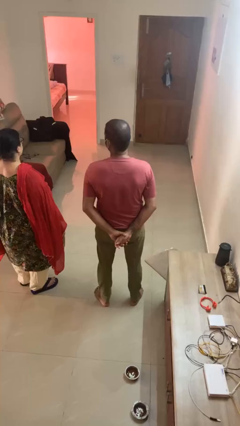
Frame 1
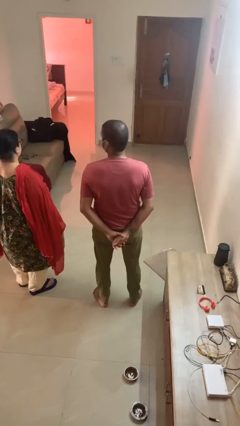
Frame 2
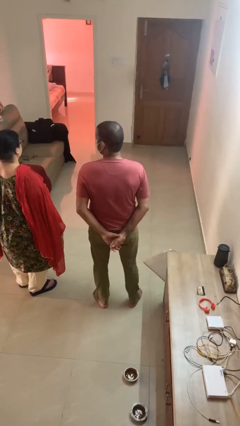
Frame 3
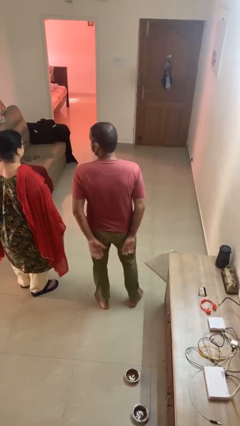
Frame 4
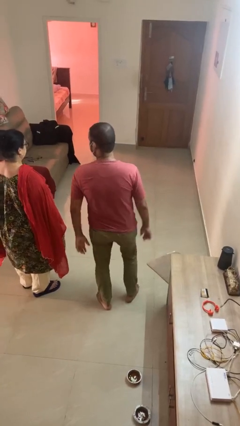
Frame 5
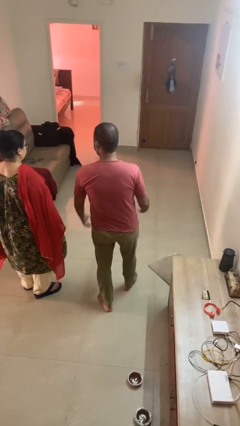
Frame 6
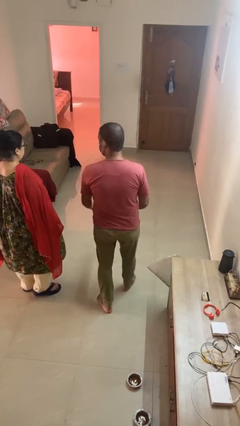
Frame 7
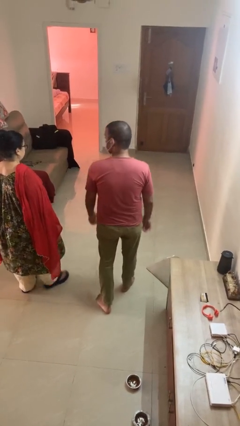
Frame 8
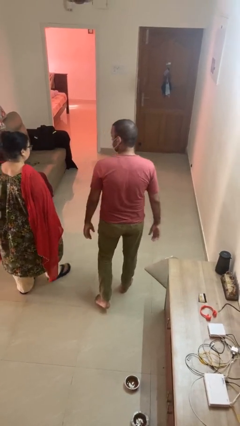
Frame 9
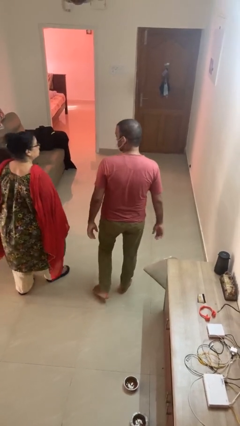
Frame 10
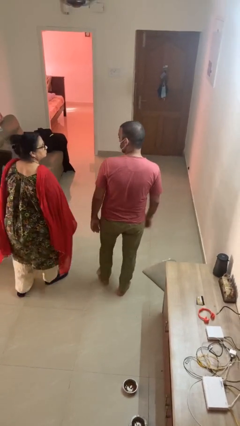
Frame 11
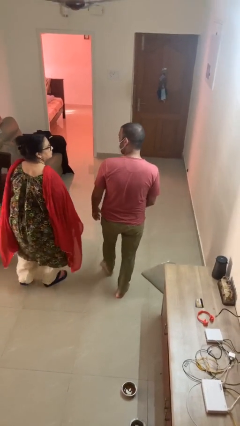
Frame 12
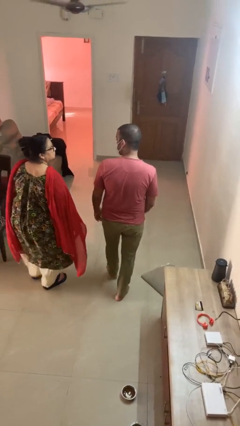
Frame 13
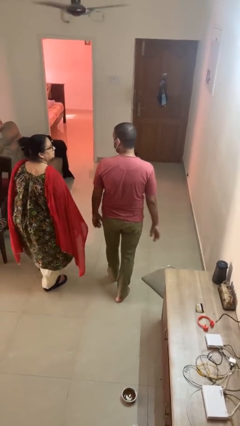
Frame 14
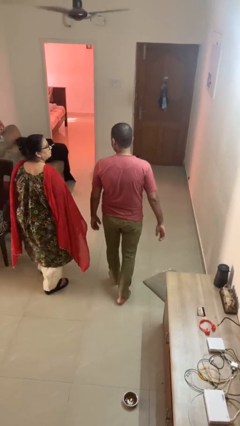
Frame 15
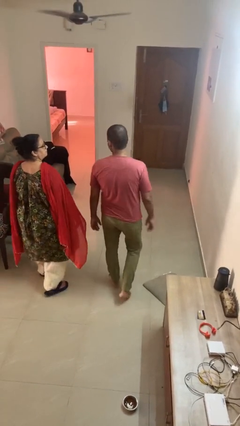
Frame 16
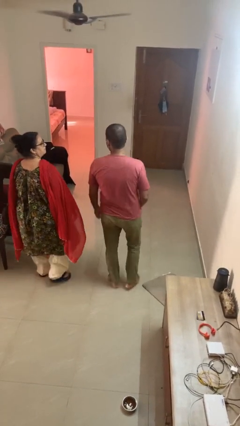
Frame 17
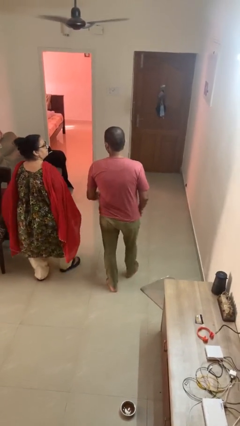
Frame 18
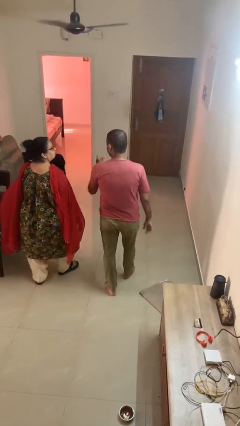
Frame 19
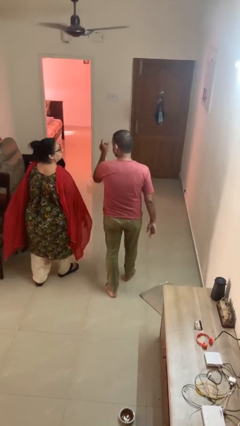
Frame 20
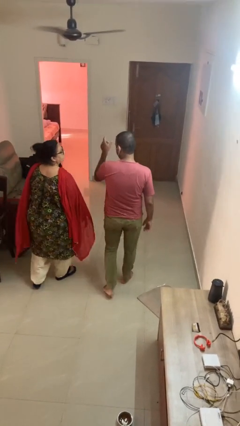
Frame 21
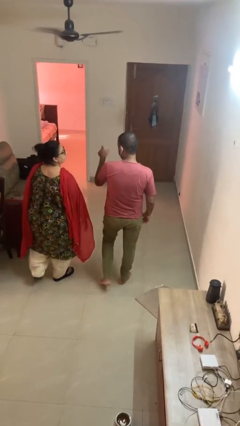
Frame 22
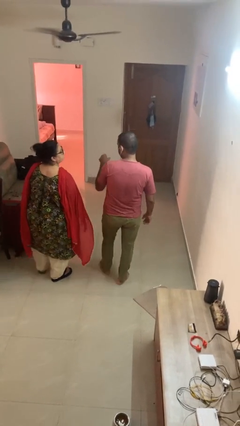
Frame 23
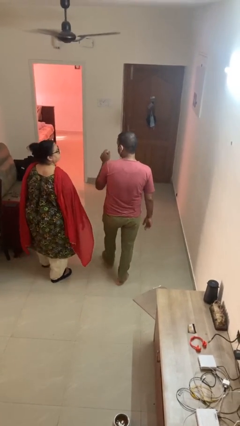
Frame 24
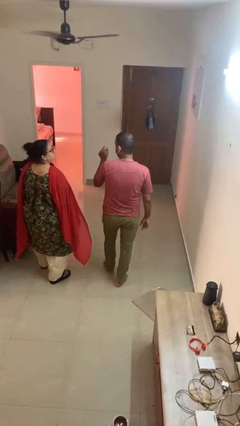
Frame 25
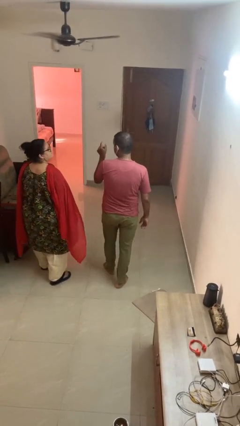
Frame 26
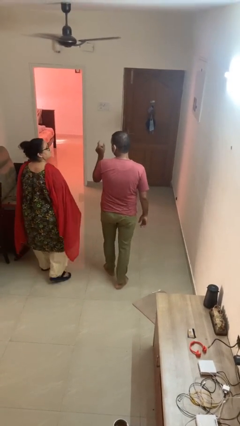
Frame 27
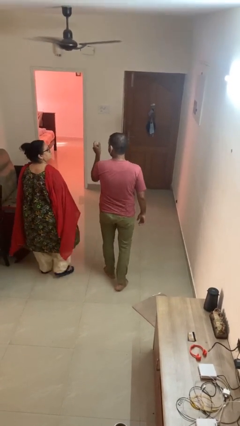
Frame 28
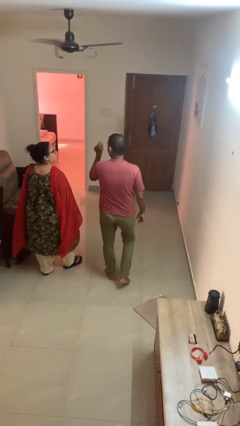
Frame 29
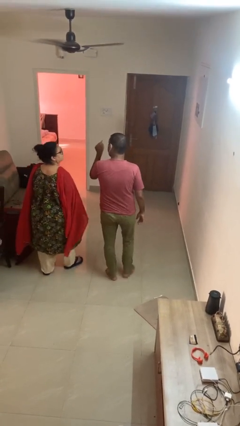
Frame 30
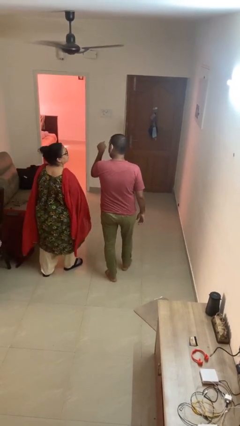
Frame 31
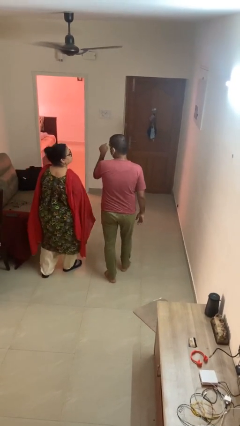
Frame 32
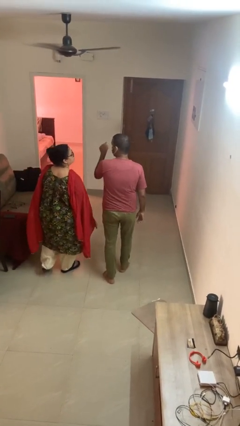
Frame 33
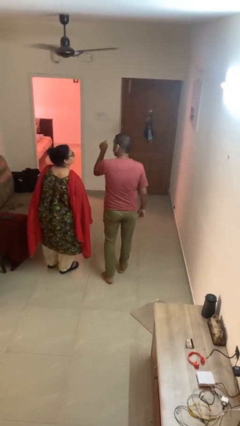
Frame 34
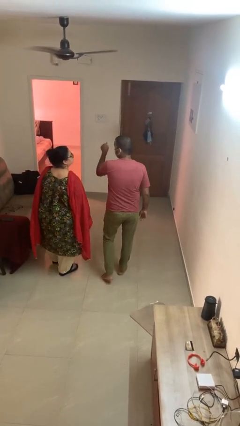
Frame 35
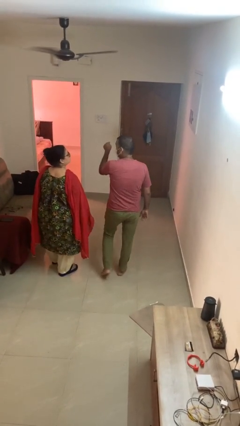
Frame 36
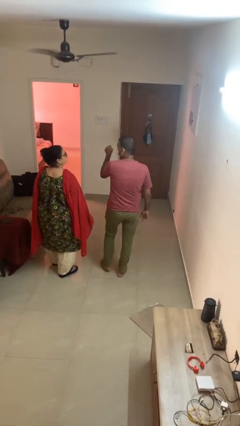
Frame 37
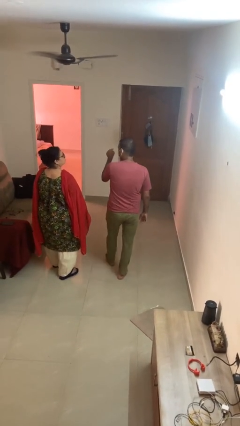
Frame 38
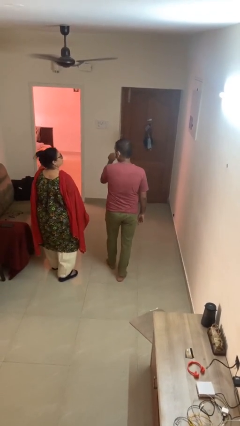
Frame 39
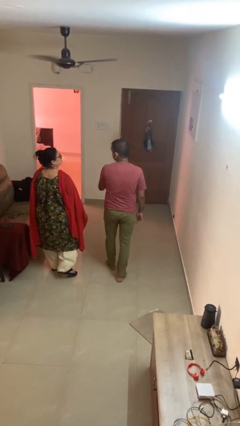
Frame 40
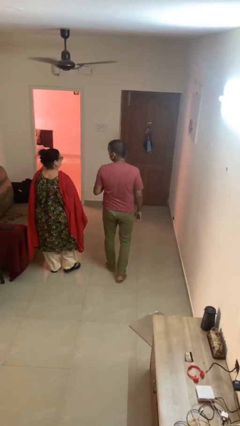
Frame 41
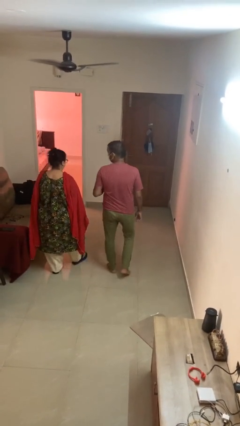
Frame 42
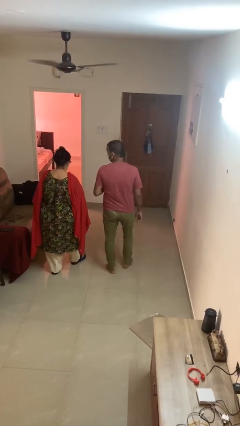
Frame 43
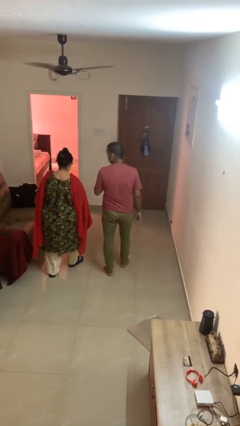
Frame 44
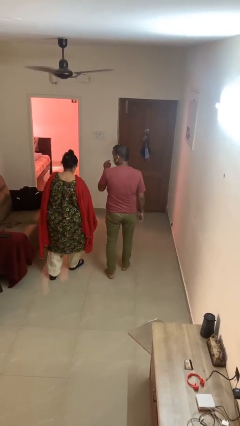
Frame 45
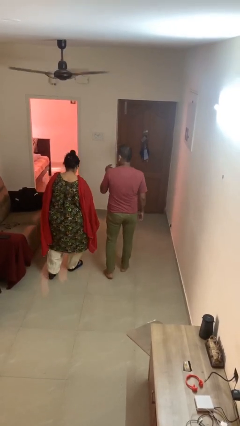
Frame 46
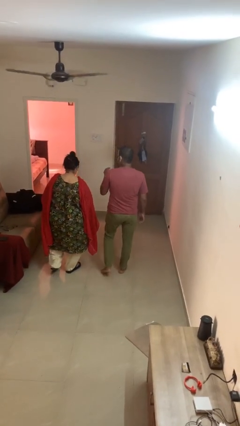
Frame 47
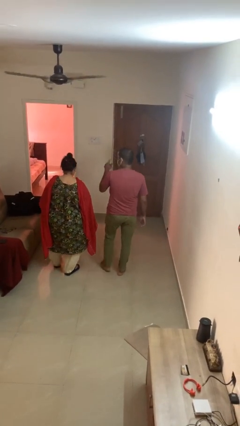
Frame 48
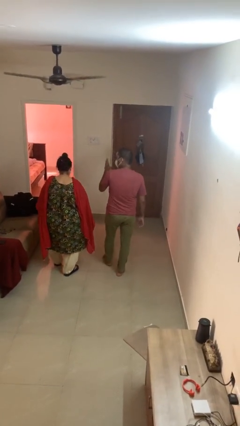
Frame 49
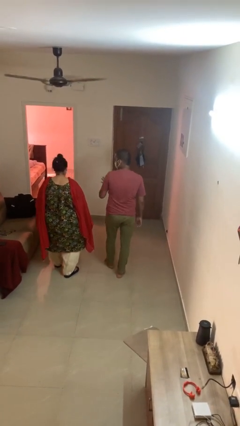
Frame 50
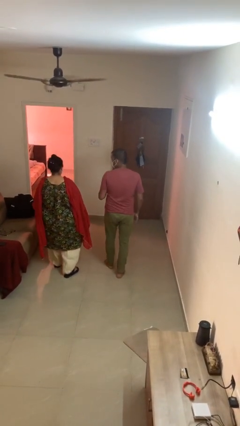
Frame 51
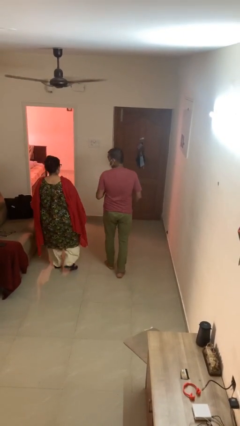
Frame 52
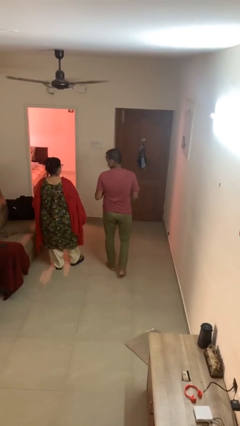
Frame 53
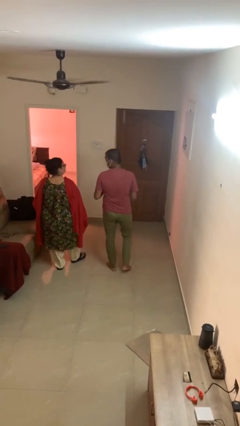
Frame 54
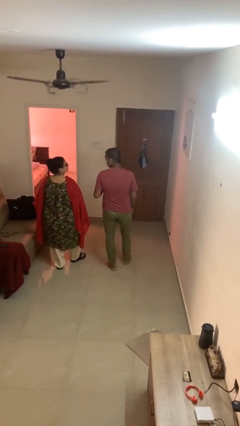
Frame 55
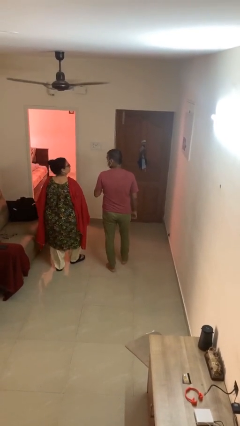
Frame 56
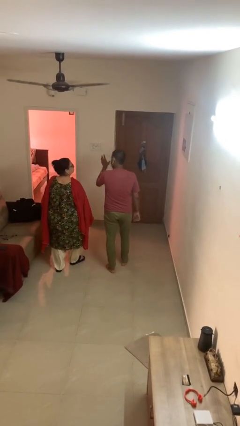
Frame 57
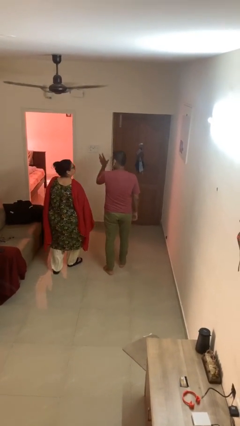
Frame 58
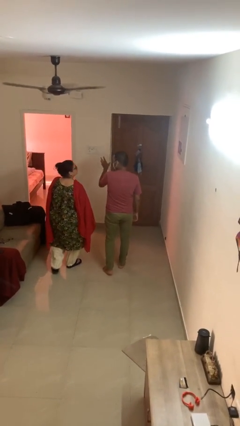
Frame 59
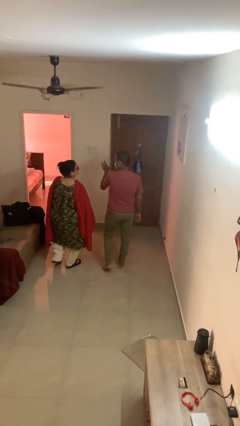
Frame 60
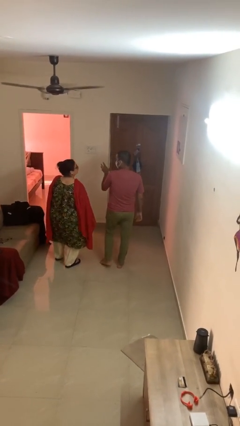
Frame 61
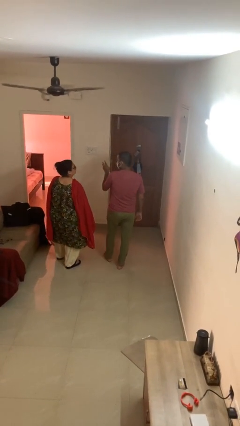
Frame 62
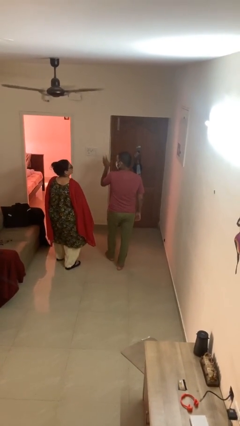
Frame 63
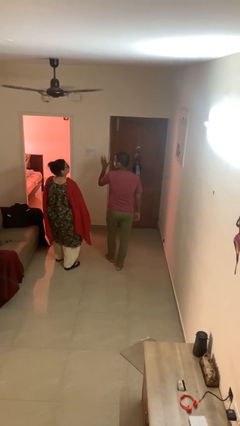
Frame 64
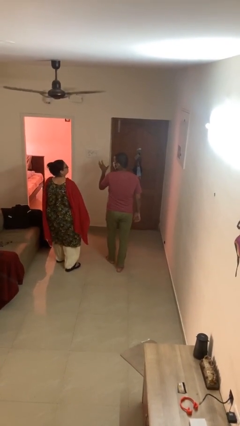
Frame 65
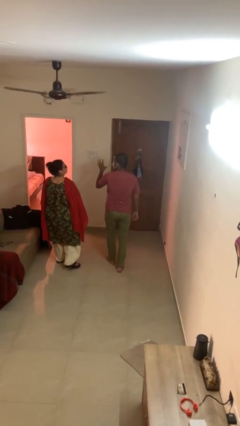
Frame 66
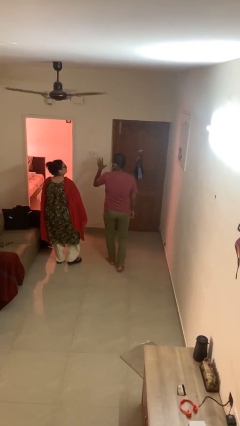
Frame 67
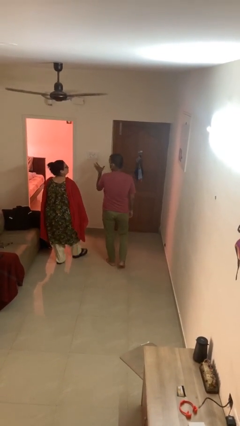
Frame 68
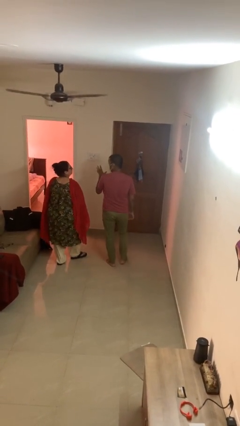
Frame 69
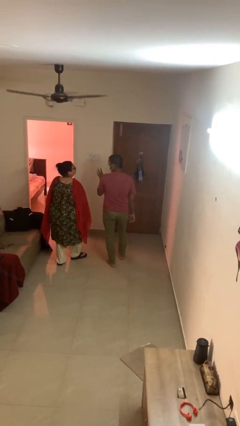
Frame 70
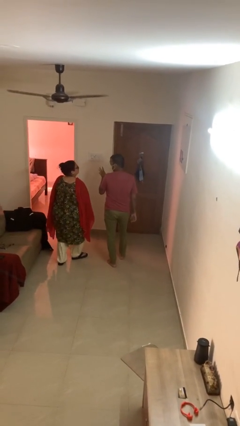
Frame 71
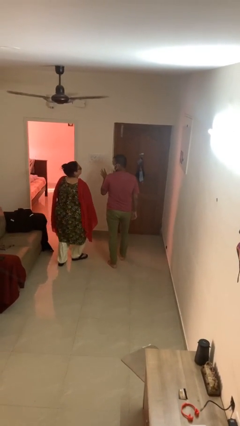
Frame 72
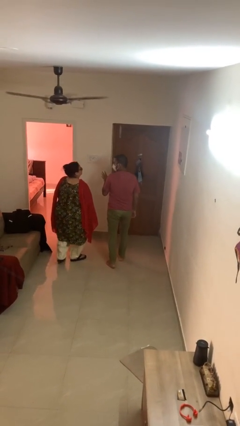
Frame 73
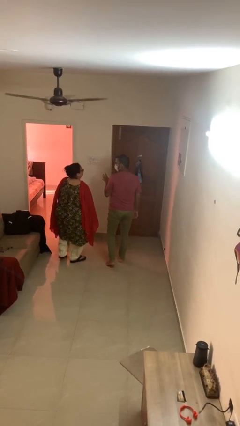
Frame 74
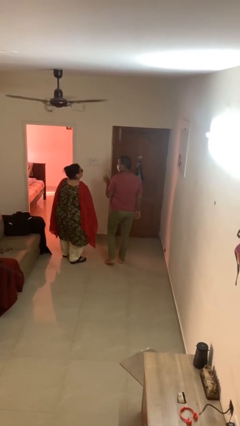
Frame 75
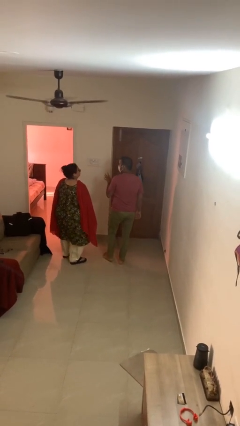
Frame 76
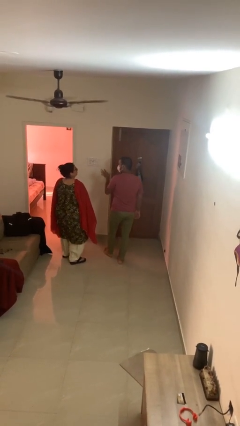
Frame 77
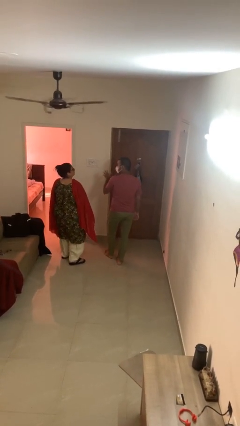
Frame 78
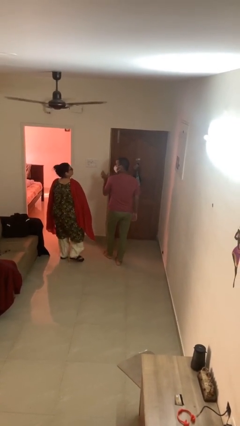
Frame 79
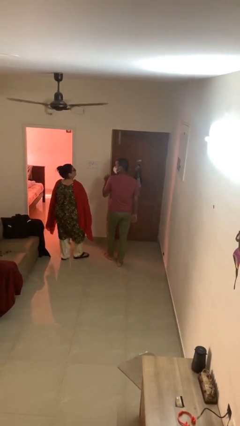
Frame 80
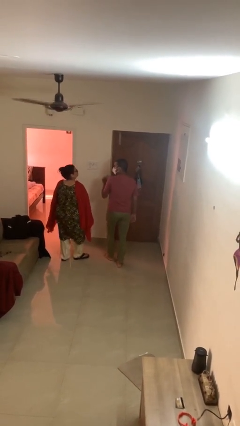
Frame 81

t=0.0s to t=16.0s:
person talks to person

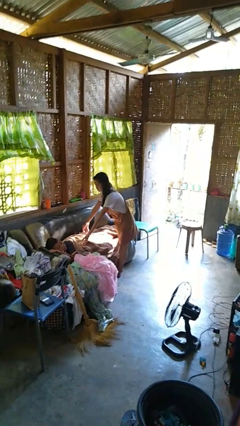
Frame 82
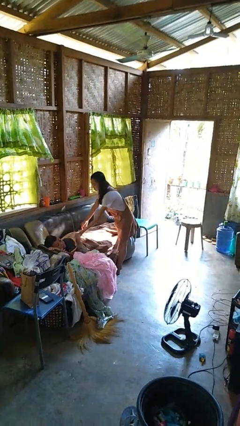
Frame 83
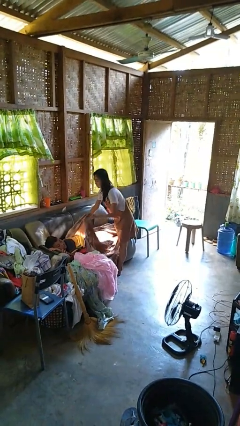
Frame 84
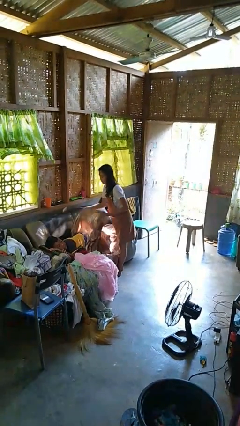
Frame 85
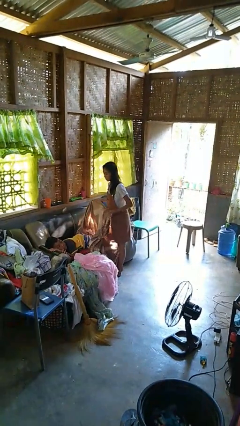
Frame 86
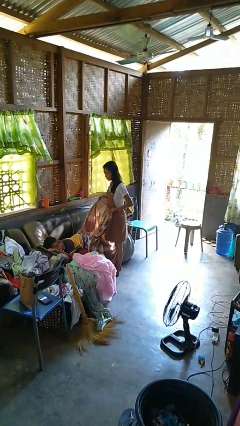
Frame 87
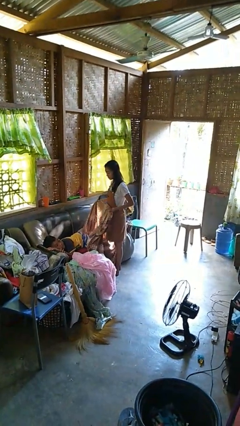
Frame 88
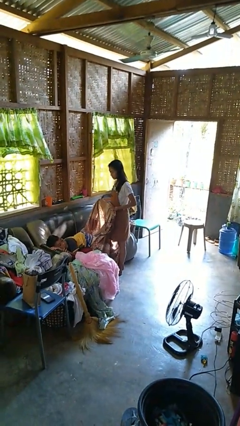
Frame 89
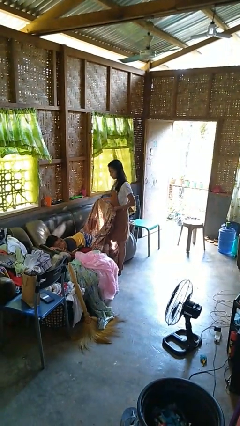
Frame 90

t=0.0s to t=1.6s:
person uncovers friend with blanket
